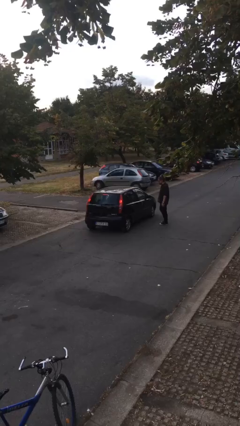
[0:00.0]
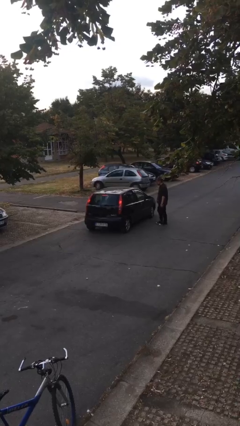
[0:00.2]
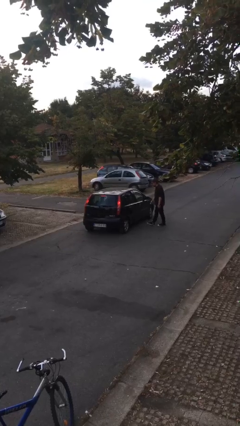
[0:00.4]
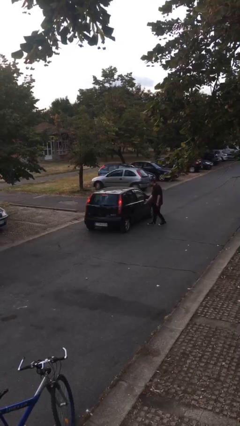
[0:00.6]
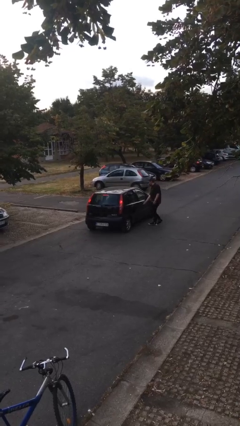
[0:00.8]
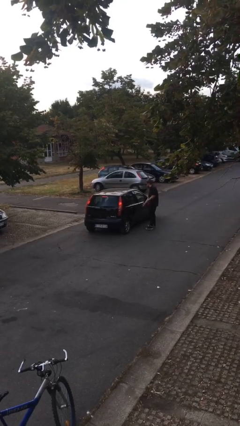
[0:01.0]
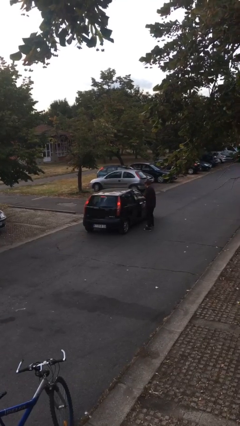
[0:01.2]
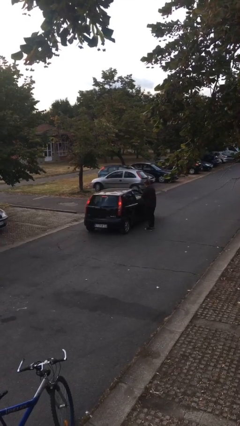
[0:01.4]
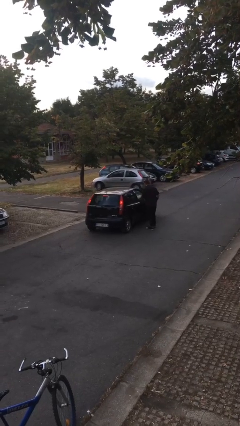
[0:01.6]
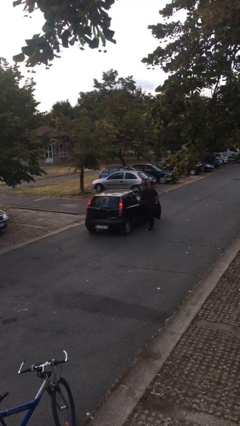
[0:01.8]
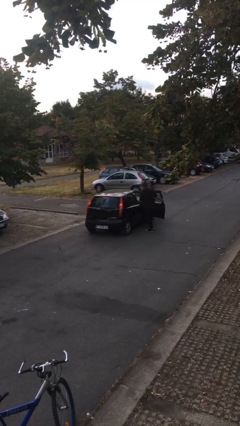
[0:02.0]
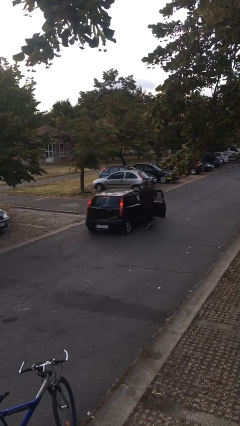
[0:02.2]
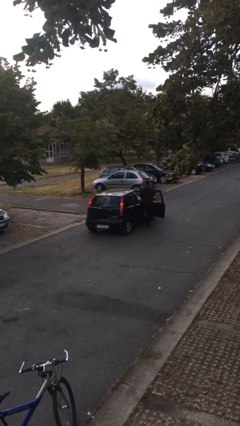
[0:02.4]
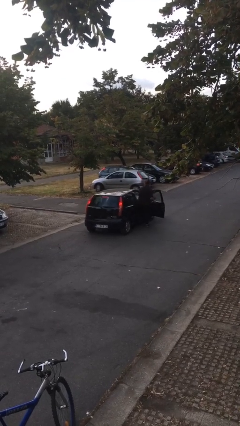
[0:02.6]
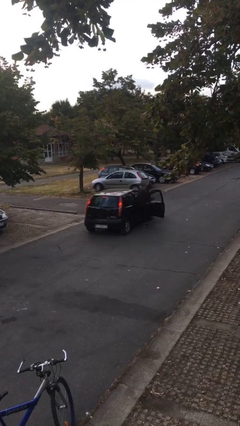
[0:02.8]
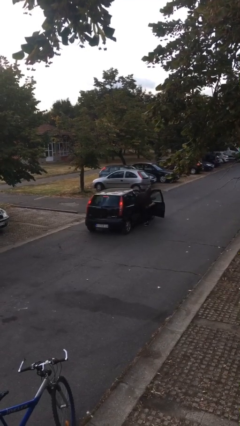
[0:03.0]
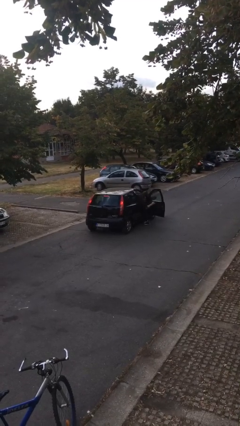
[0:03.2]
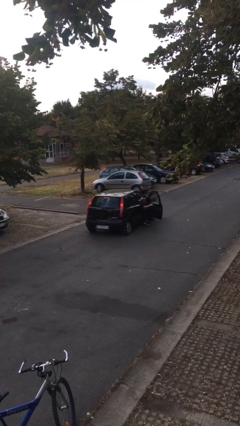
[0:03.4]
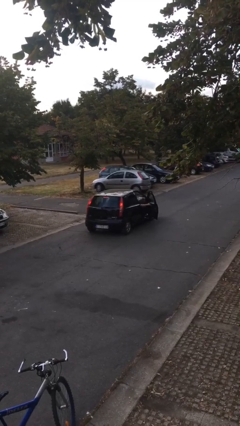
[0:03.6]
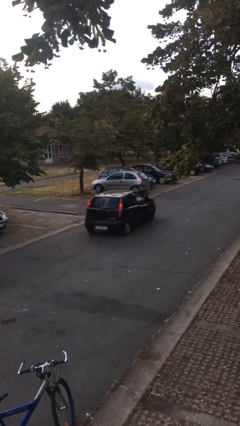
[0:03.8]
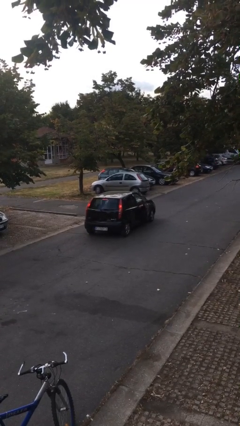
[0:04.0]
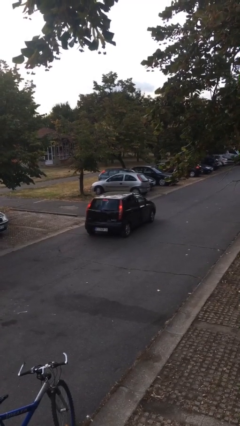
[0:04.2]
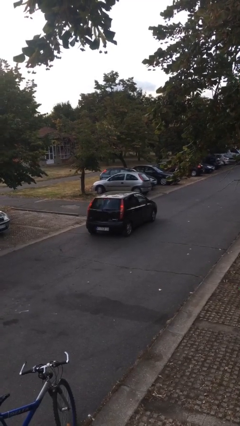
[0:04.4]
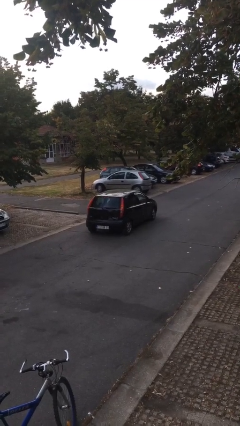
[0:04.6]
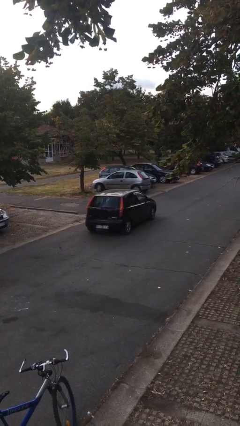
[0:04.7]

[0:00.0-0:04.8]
car picks up person

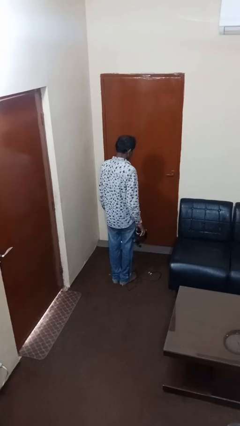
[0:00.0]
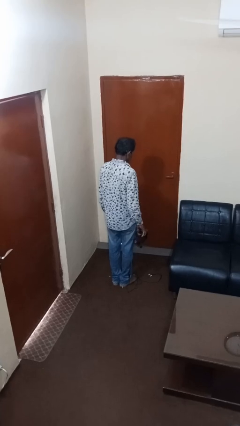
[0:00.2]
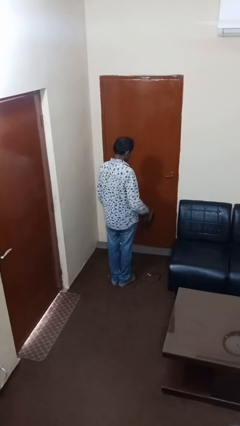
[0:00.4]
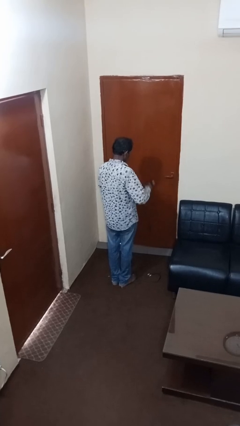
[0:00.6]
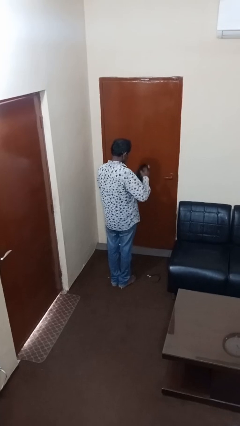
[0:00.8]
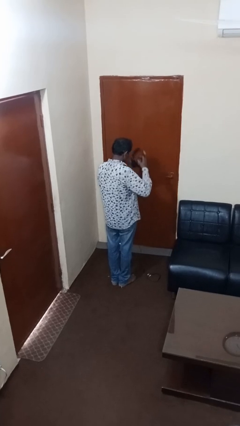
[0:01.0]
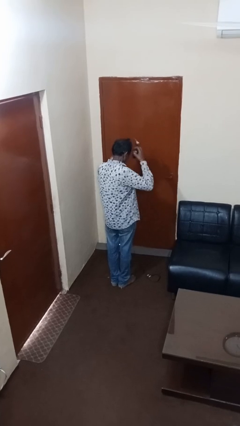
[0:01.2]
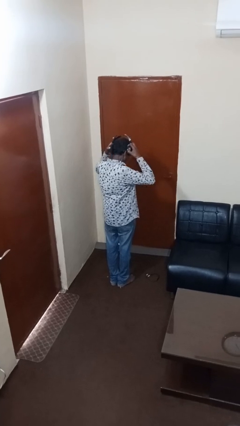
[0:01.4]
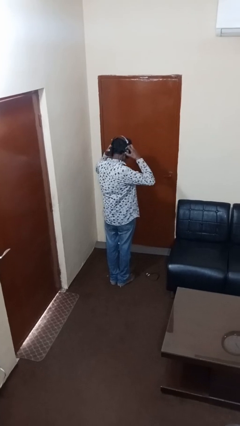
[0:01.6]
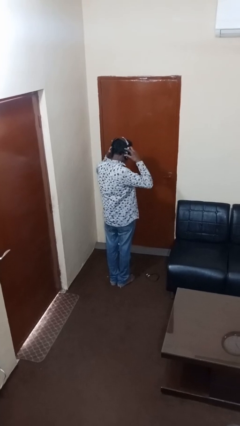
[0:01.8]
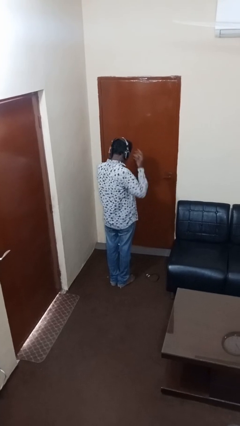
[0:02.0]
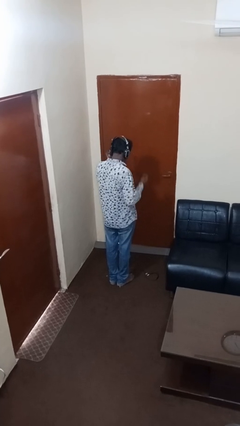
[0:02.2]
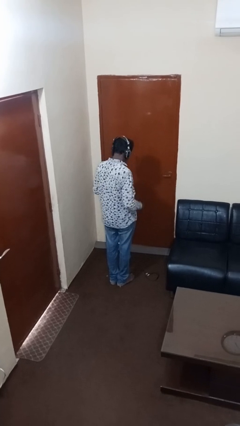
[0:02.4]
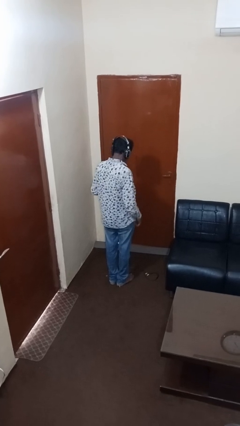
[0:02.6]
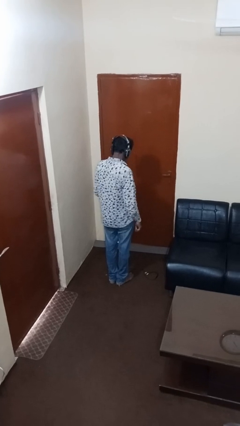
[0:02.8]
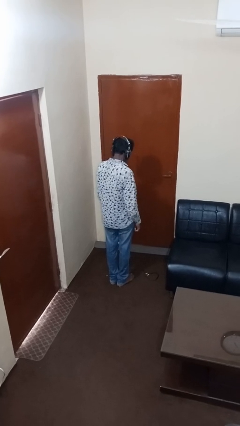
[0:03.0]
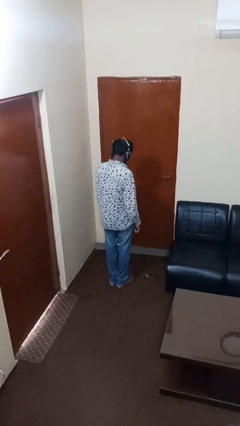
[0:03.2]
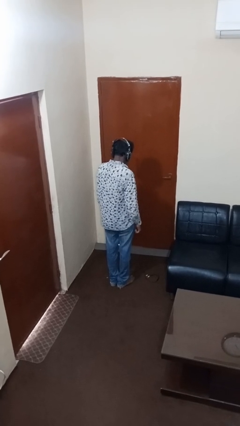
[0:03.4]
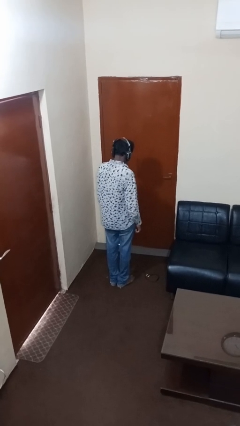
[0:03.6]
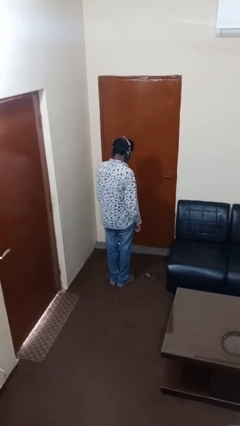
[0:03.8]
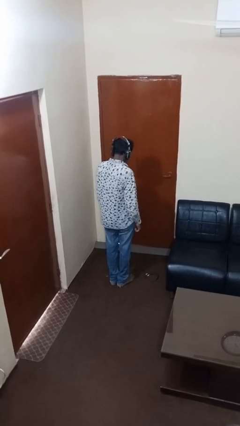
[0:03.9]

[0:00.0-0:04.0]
person puts on headphones

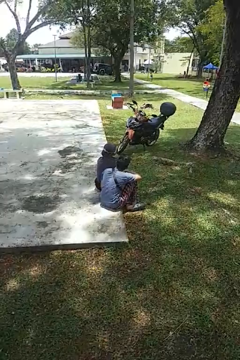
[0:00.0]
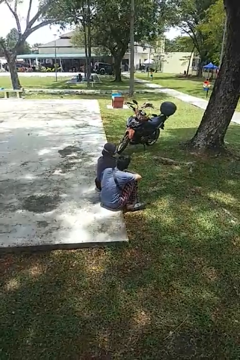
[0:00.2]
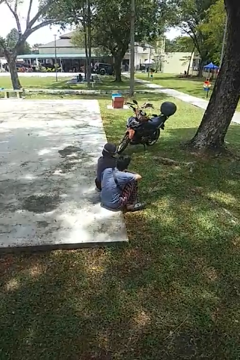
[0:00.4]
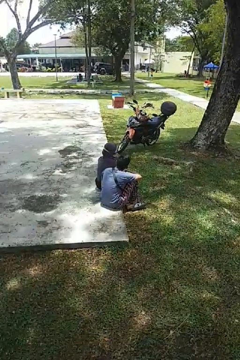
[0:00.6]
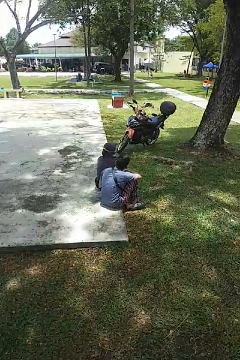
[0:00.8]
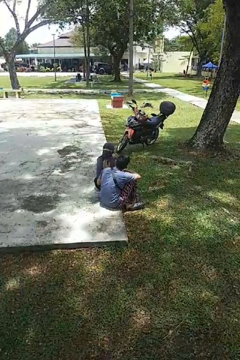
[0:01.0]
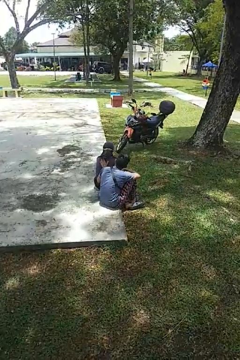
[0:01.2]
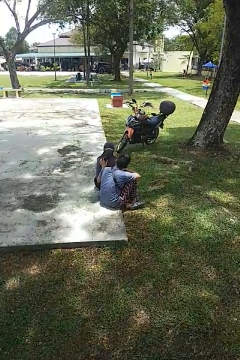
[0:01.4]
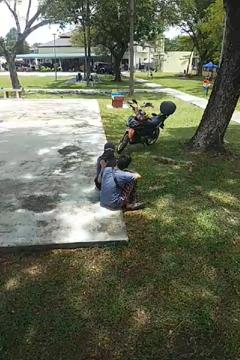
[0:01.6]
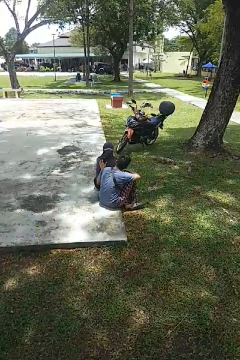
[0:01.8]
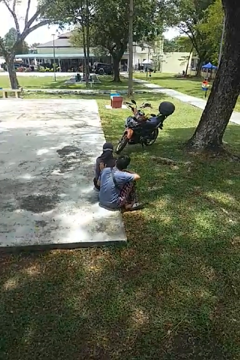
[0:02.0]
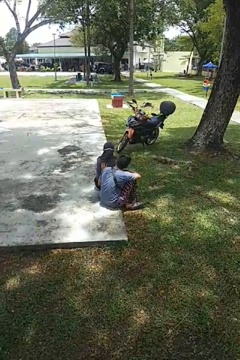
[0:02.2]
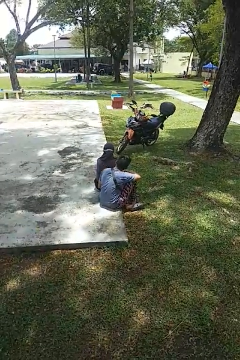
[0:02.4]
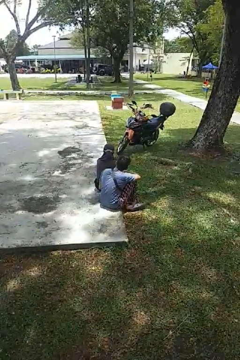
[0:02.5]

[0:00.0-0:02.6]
person touches back of person

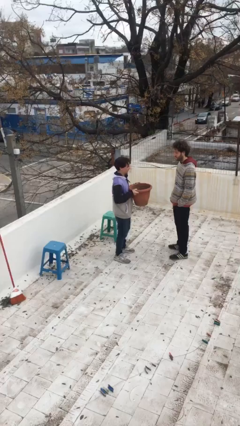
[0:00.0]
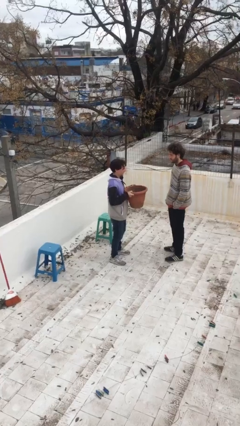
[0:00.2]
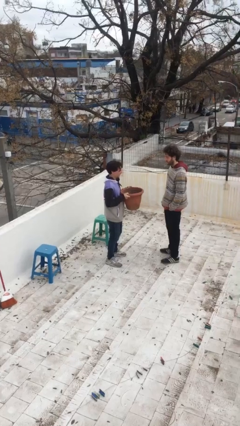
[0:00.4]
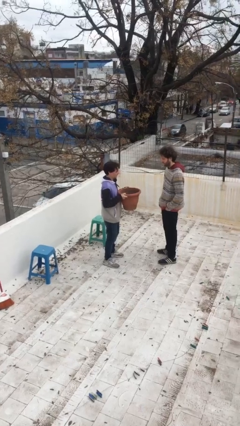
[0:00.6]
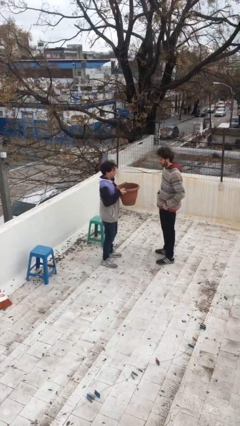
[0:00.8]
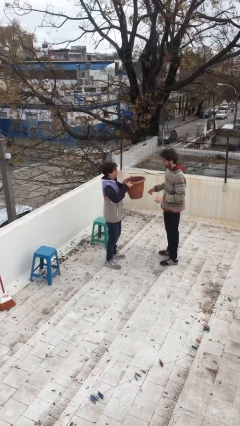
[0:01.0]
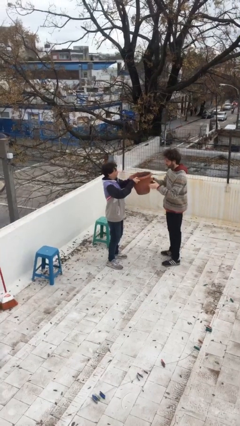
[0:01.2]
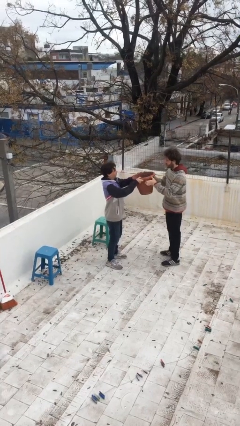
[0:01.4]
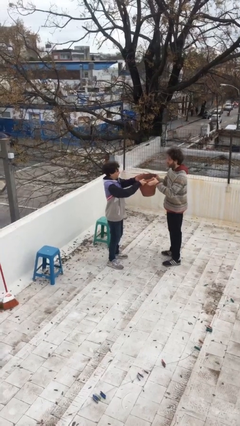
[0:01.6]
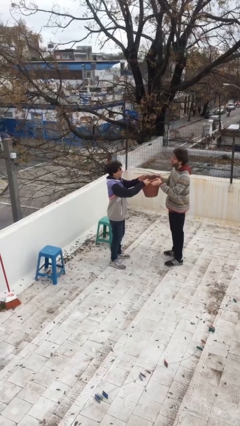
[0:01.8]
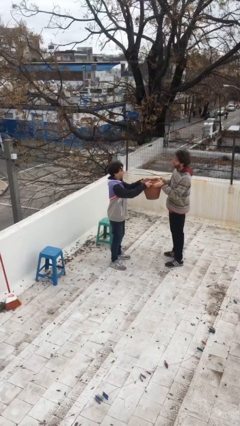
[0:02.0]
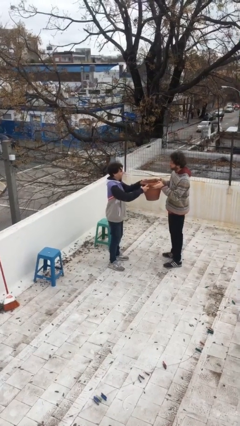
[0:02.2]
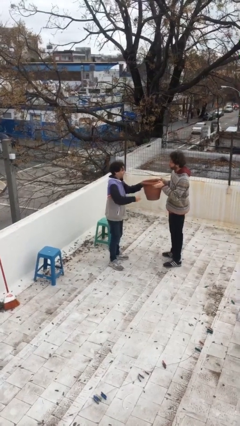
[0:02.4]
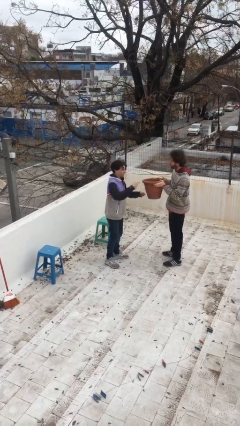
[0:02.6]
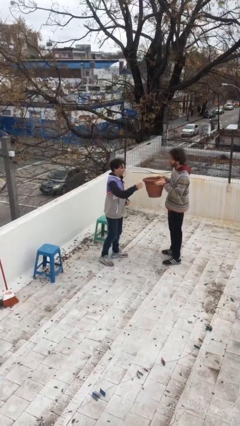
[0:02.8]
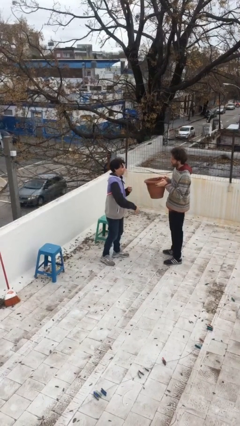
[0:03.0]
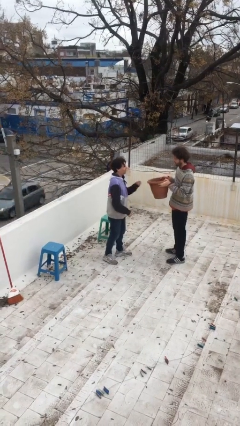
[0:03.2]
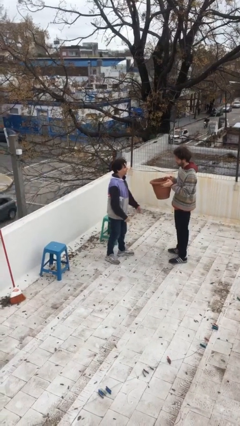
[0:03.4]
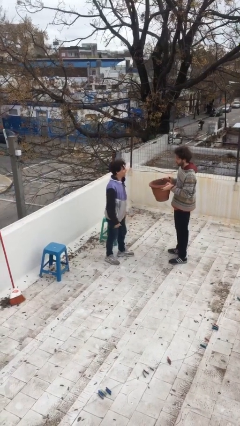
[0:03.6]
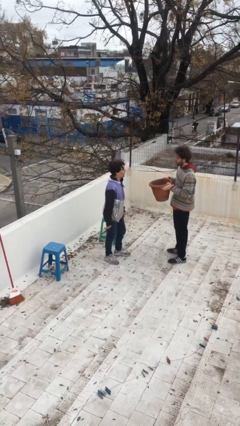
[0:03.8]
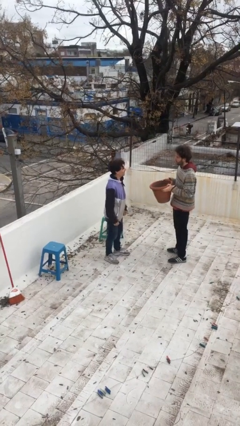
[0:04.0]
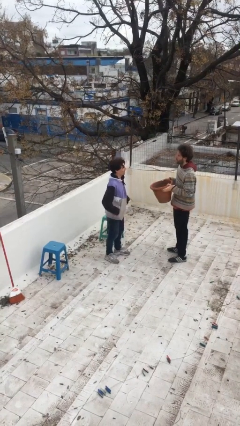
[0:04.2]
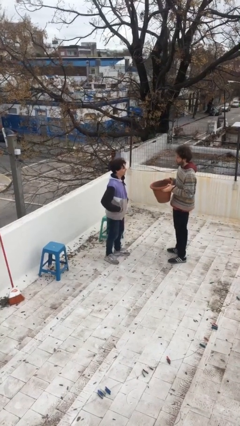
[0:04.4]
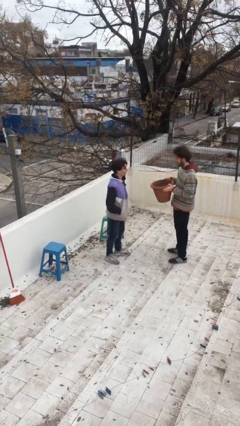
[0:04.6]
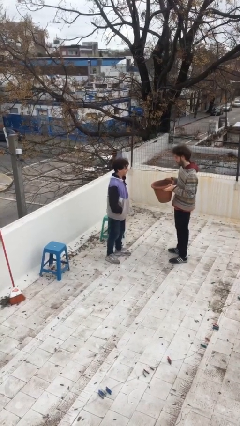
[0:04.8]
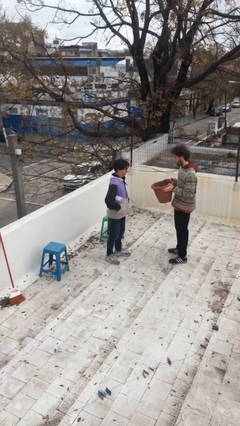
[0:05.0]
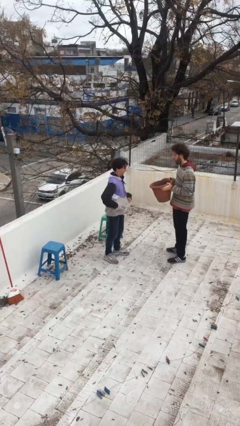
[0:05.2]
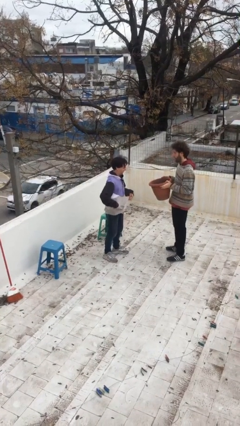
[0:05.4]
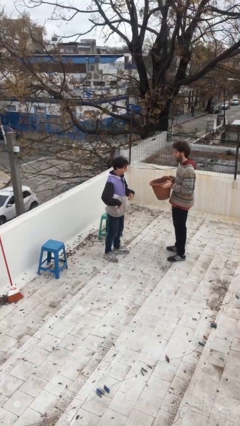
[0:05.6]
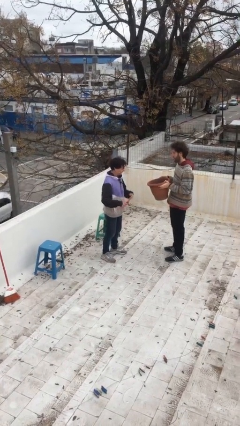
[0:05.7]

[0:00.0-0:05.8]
person transfers object to person

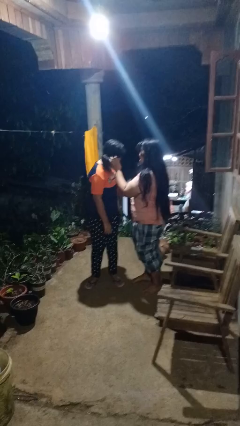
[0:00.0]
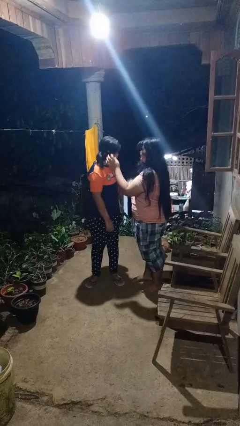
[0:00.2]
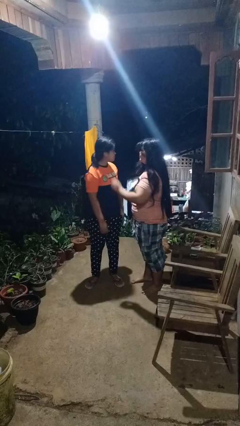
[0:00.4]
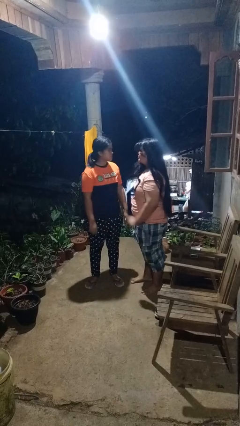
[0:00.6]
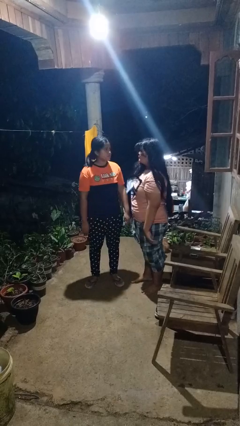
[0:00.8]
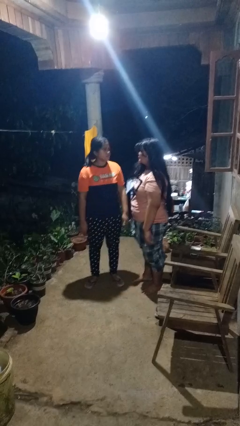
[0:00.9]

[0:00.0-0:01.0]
person grabs person by hair
